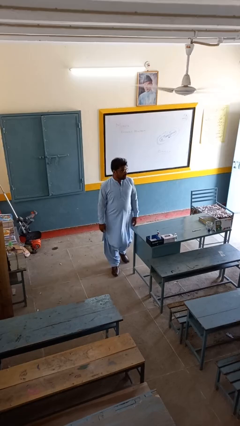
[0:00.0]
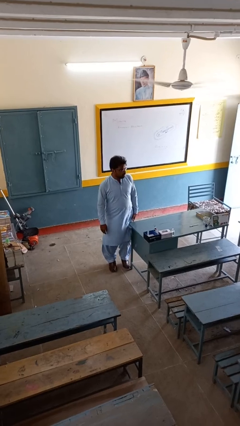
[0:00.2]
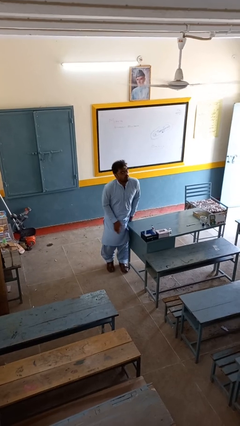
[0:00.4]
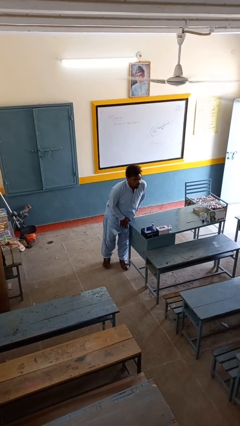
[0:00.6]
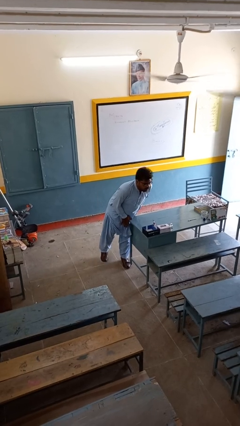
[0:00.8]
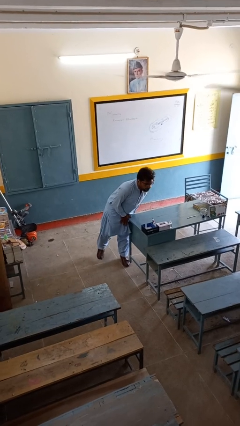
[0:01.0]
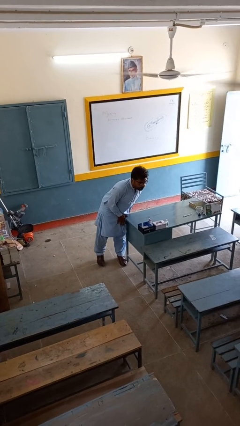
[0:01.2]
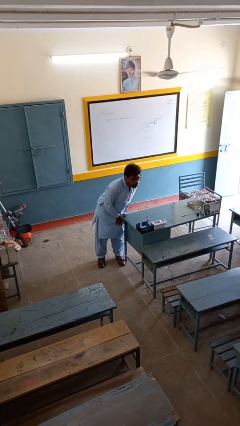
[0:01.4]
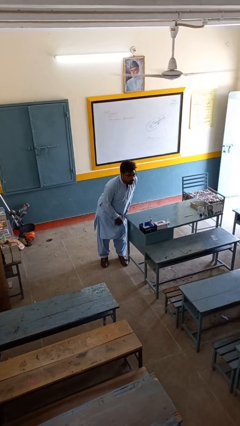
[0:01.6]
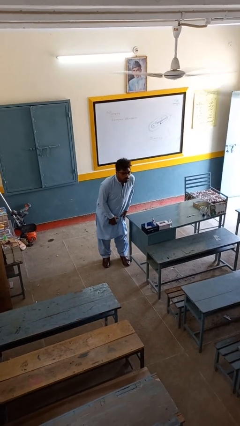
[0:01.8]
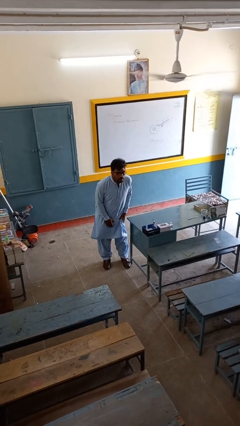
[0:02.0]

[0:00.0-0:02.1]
person bumps into table

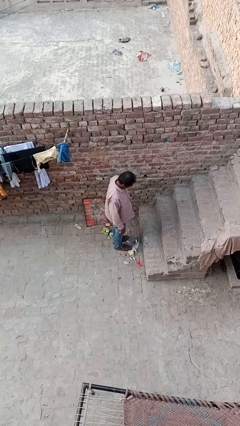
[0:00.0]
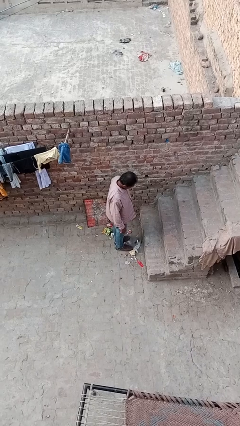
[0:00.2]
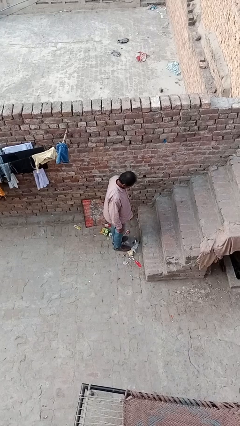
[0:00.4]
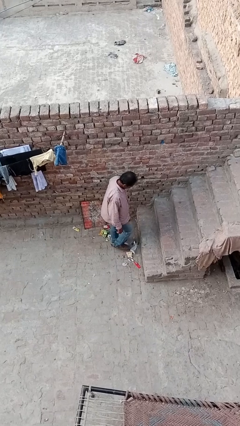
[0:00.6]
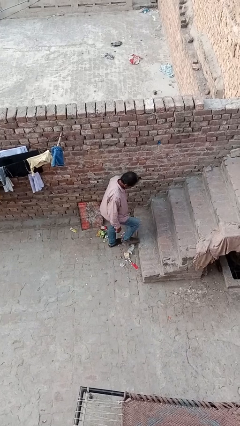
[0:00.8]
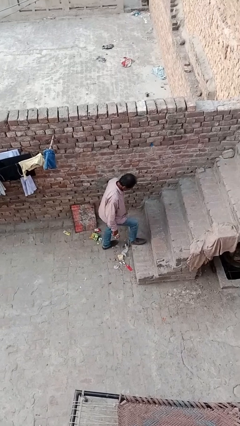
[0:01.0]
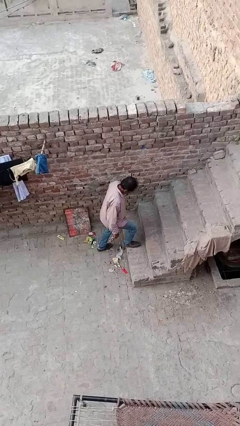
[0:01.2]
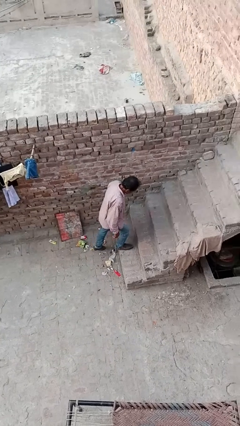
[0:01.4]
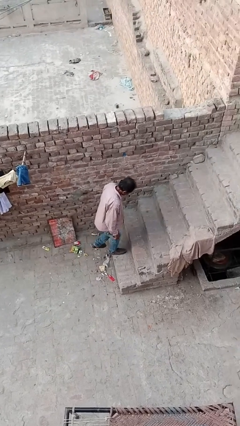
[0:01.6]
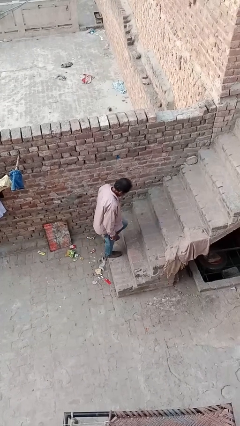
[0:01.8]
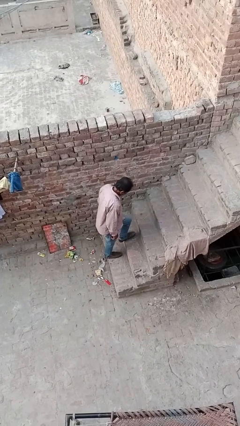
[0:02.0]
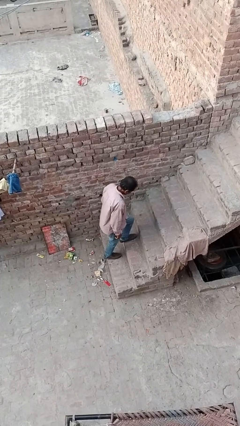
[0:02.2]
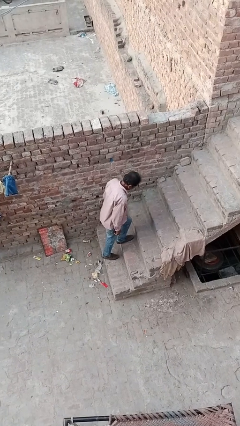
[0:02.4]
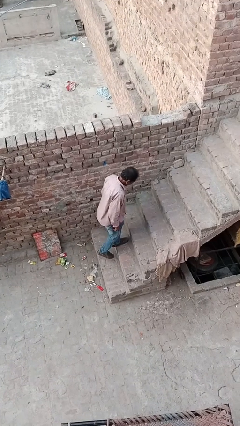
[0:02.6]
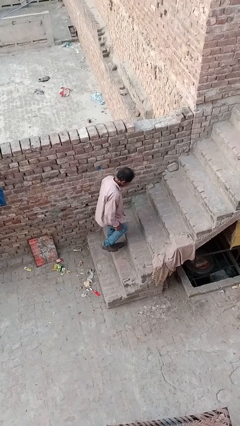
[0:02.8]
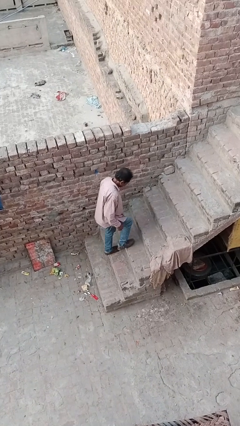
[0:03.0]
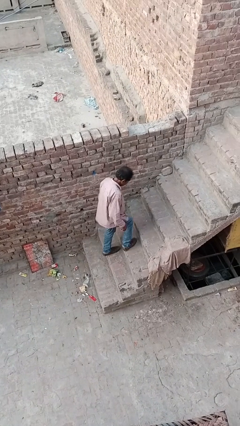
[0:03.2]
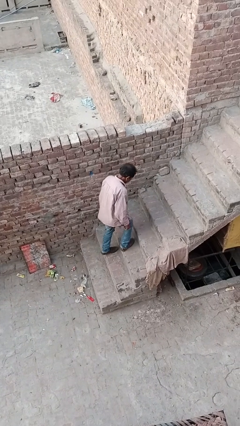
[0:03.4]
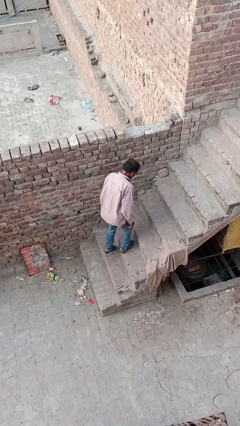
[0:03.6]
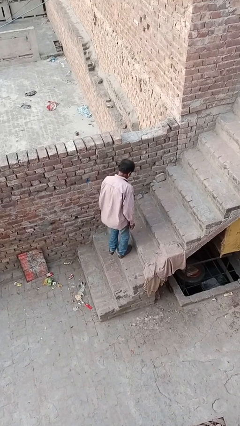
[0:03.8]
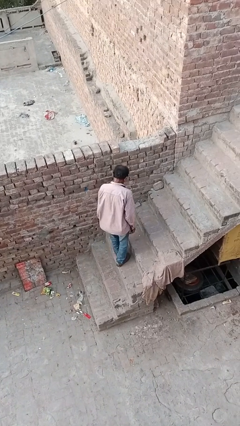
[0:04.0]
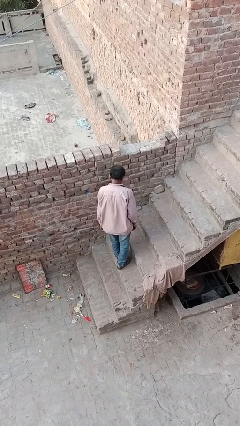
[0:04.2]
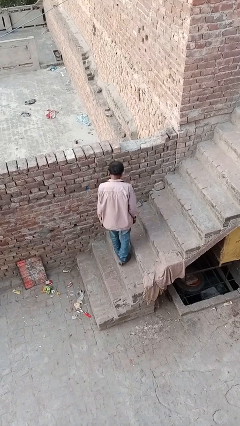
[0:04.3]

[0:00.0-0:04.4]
person climbs up stairs

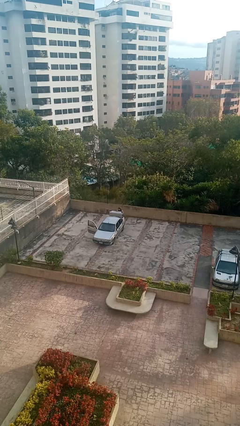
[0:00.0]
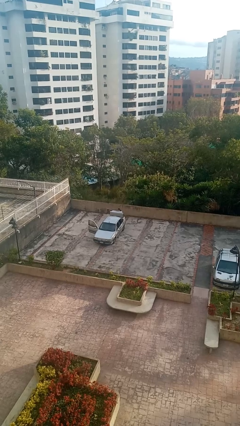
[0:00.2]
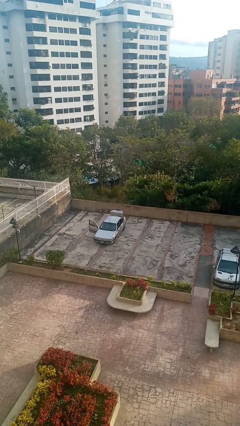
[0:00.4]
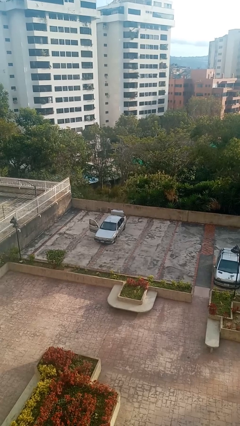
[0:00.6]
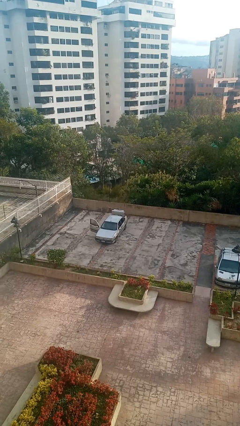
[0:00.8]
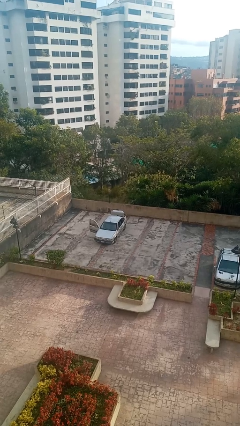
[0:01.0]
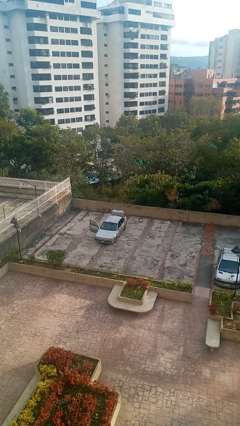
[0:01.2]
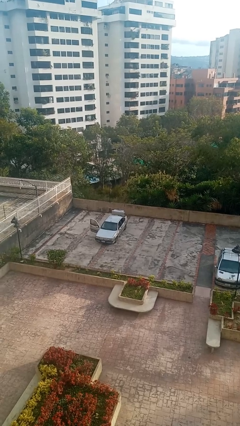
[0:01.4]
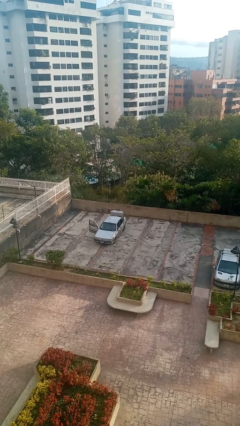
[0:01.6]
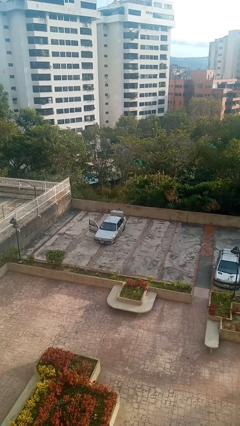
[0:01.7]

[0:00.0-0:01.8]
person loads car

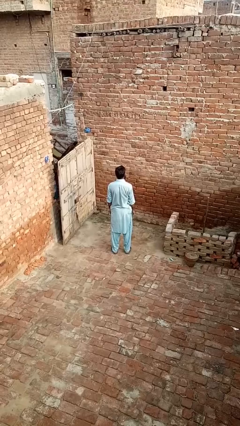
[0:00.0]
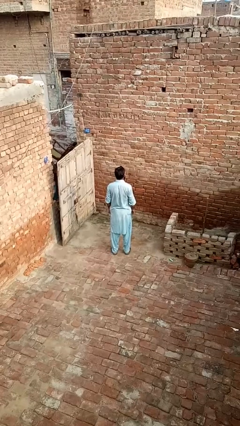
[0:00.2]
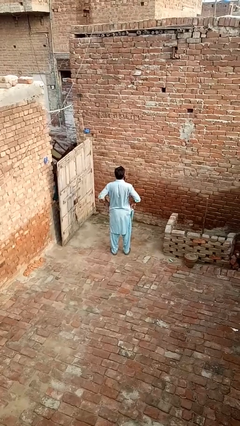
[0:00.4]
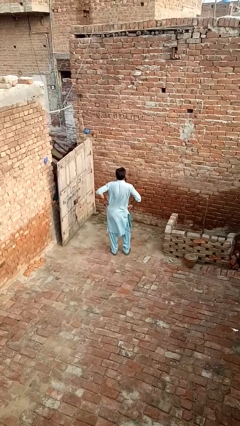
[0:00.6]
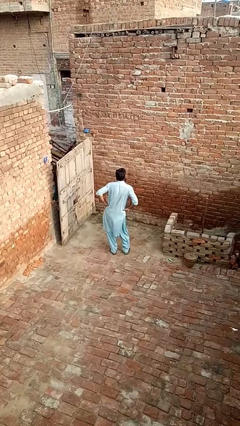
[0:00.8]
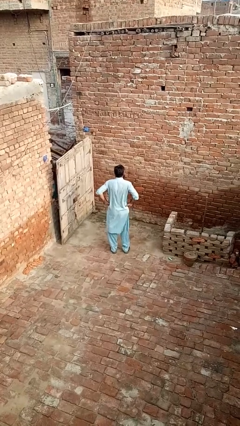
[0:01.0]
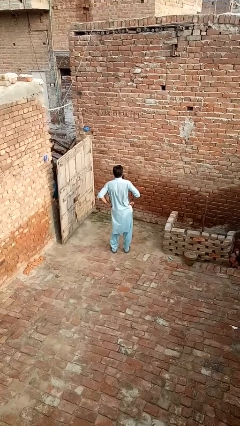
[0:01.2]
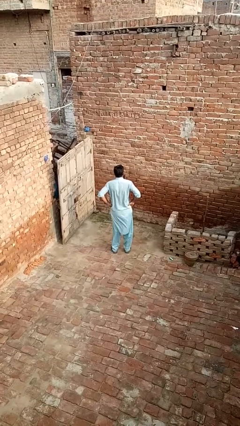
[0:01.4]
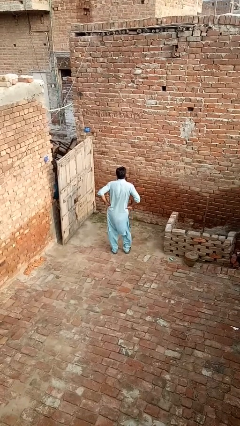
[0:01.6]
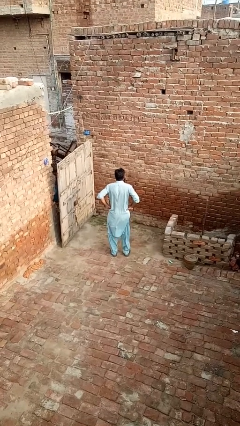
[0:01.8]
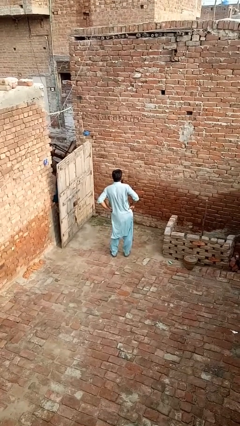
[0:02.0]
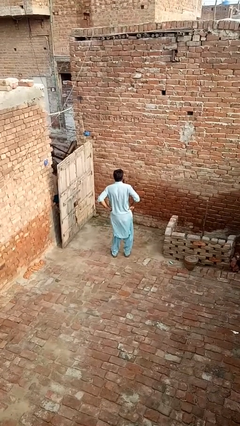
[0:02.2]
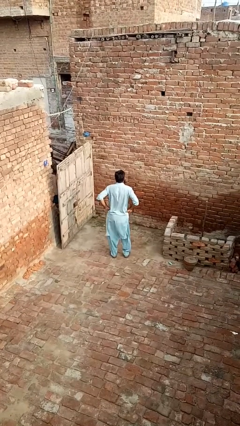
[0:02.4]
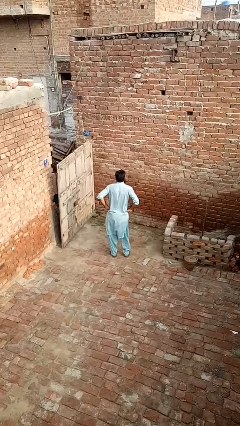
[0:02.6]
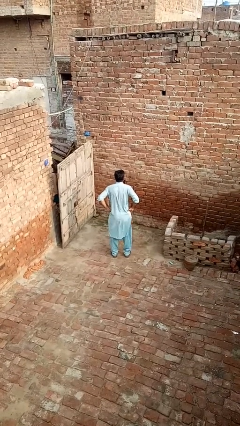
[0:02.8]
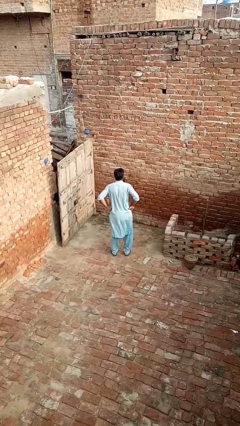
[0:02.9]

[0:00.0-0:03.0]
person wiggles hips

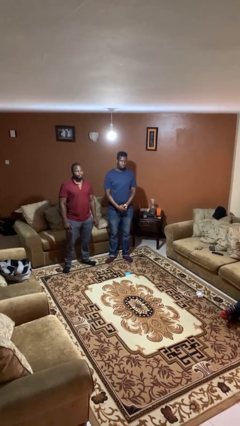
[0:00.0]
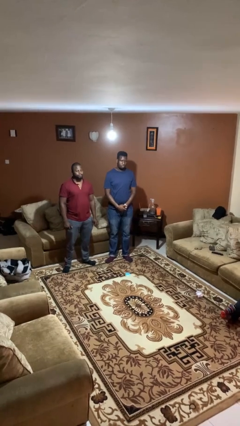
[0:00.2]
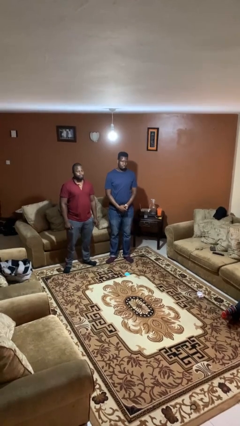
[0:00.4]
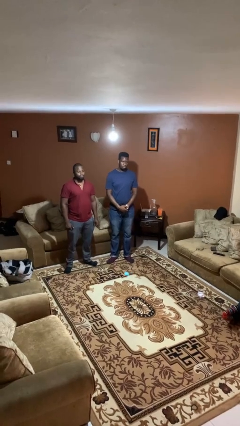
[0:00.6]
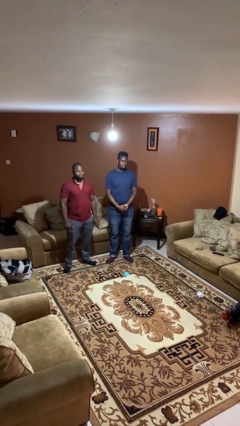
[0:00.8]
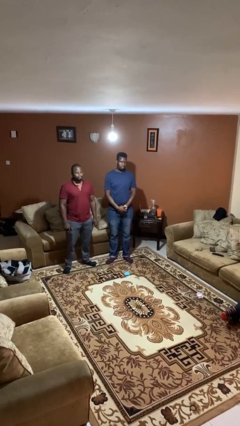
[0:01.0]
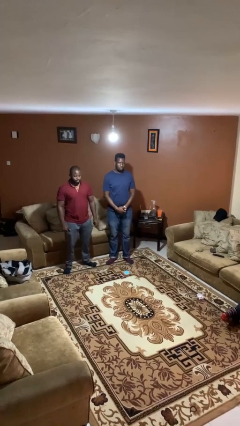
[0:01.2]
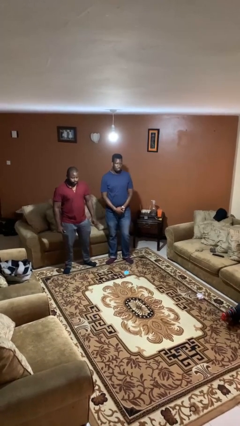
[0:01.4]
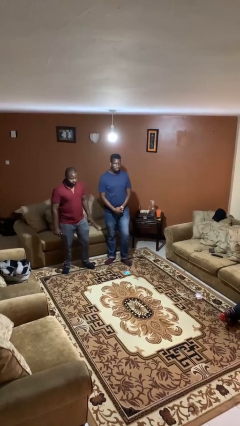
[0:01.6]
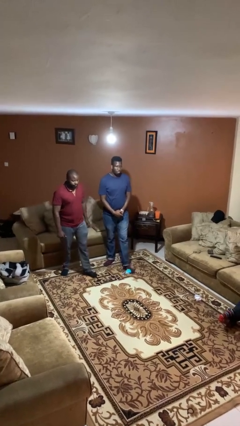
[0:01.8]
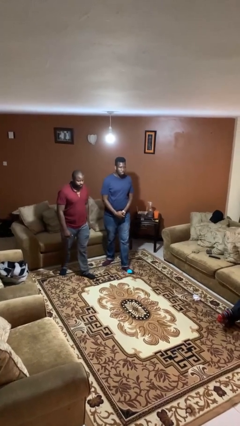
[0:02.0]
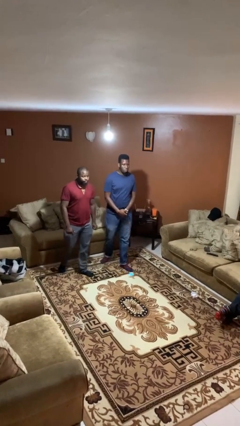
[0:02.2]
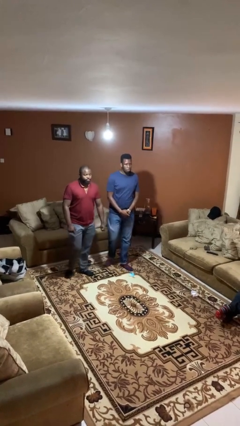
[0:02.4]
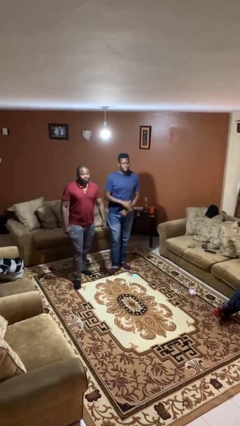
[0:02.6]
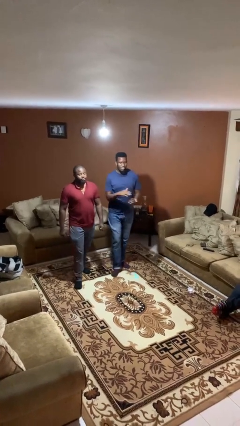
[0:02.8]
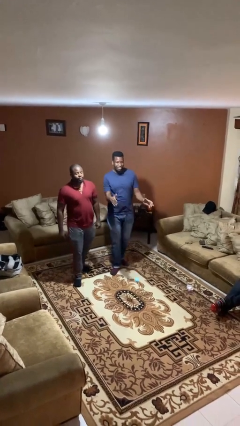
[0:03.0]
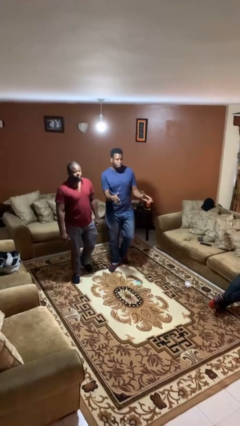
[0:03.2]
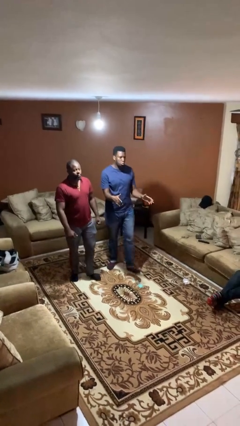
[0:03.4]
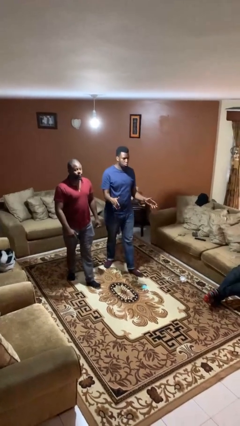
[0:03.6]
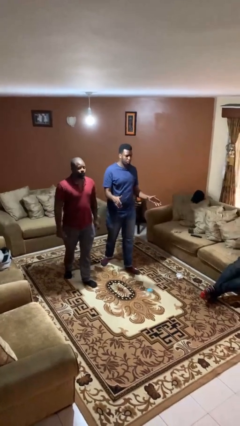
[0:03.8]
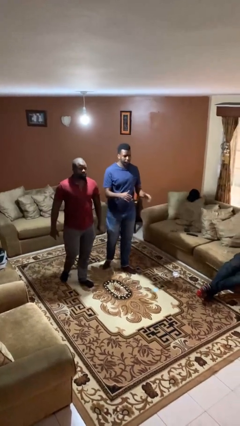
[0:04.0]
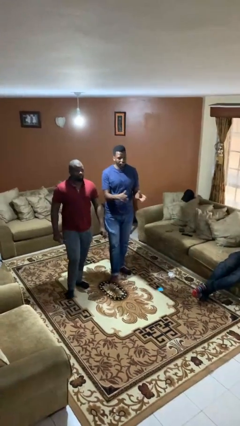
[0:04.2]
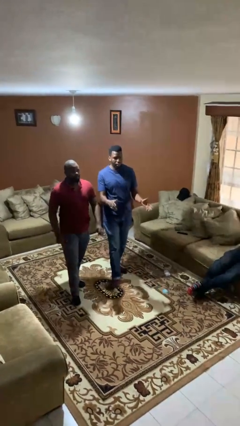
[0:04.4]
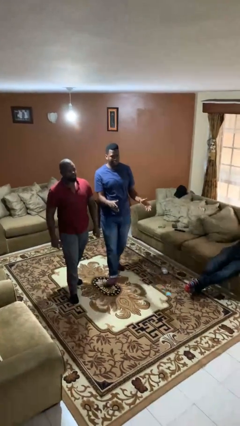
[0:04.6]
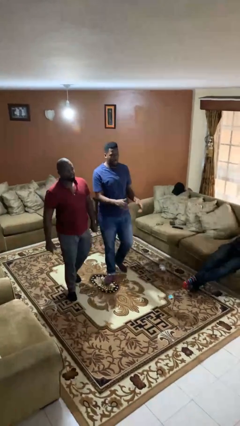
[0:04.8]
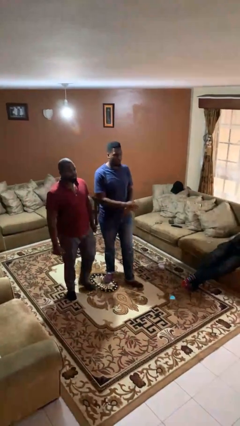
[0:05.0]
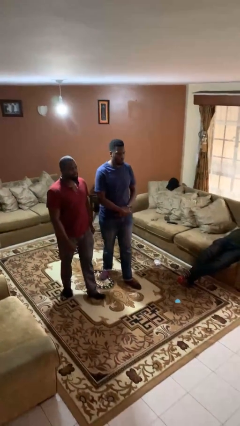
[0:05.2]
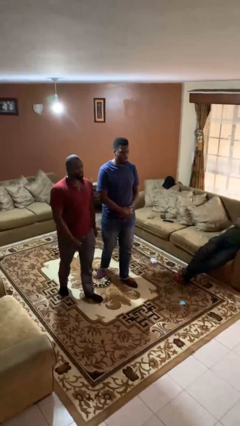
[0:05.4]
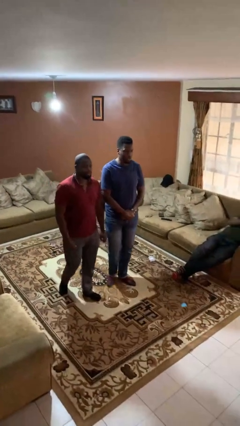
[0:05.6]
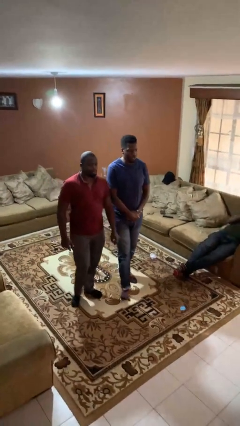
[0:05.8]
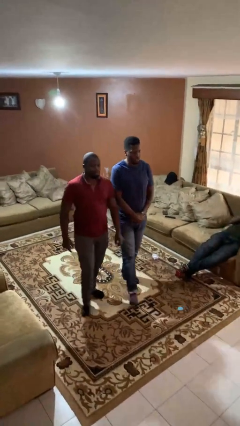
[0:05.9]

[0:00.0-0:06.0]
person talks to person
